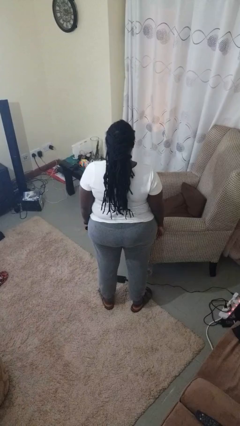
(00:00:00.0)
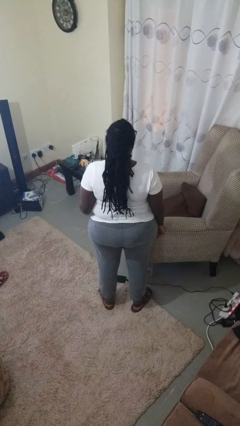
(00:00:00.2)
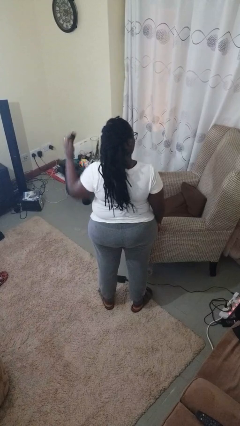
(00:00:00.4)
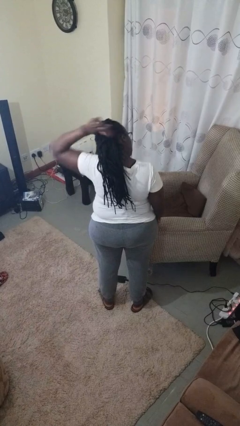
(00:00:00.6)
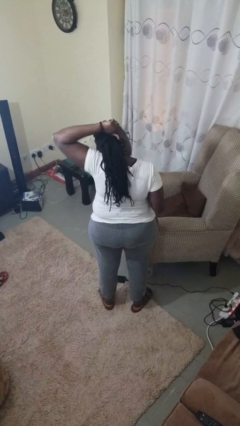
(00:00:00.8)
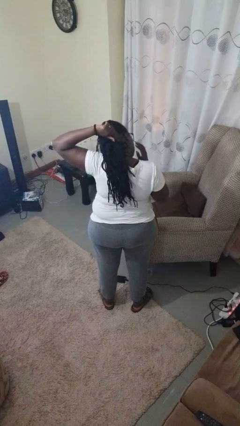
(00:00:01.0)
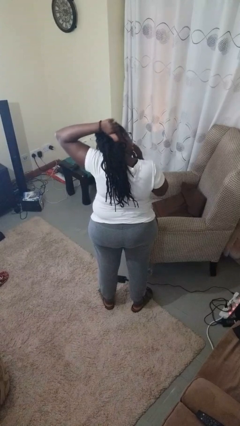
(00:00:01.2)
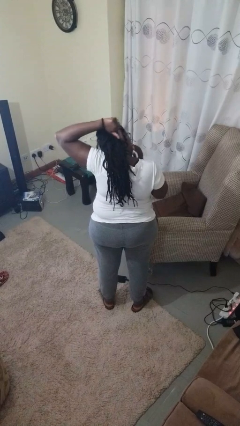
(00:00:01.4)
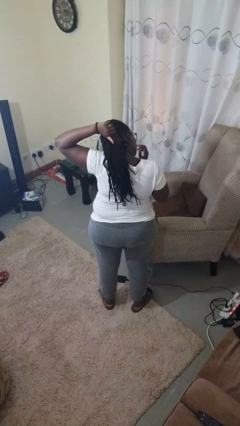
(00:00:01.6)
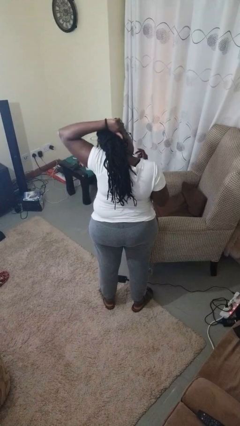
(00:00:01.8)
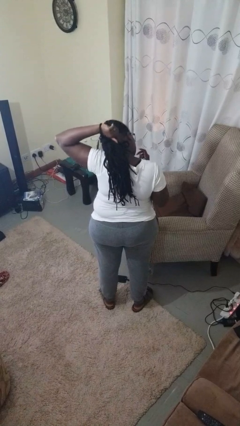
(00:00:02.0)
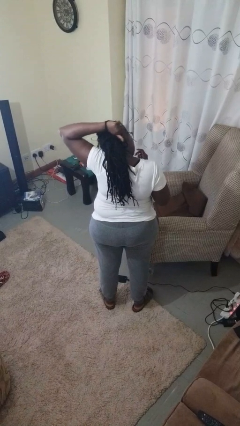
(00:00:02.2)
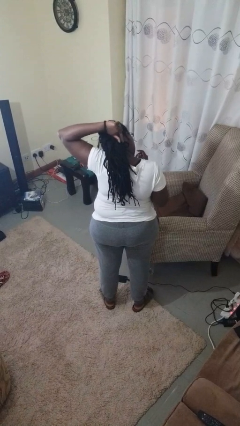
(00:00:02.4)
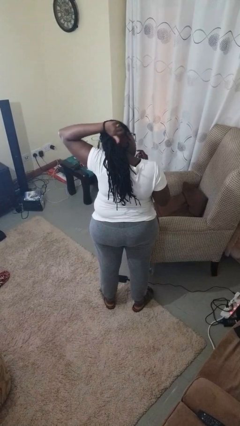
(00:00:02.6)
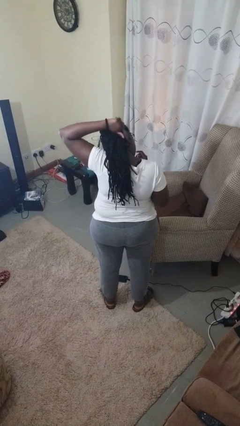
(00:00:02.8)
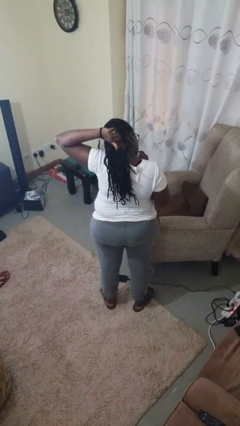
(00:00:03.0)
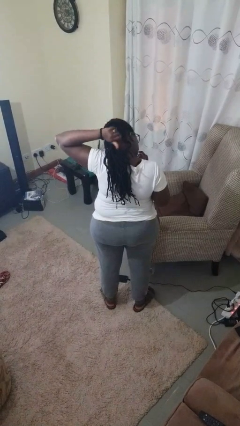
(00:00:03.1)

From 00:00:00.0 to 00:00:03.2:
person brushes hair

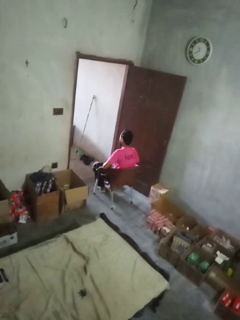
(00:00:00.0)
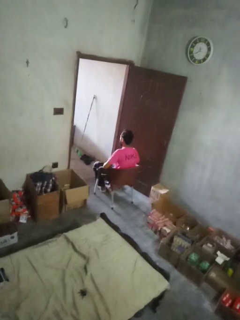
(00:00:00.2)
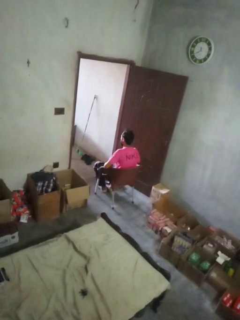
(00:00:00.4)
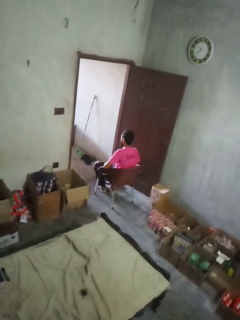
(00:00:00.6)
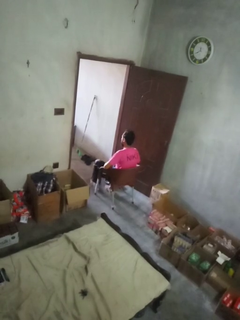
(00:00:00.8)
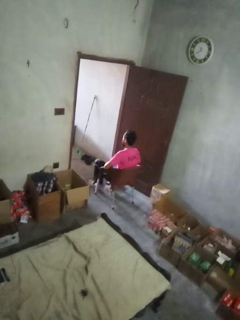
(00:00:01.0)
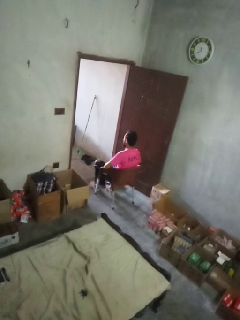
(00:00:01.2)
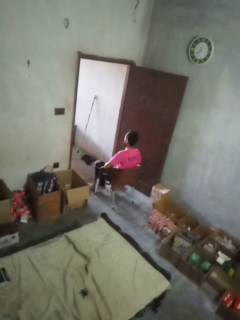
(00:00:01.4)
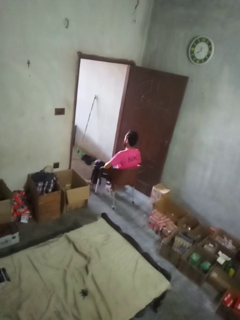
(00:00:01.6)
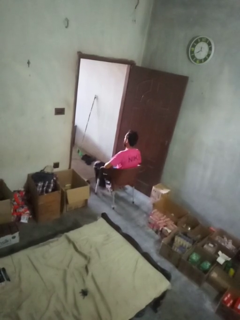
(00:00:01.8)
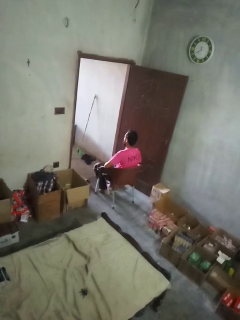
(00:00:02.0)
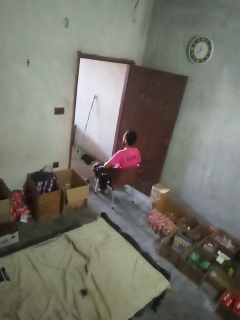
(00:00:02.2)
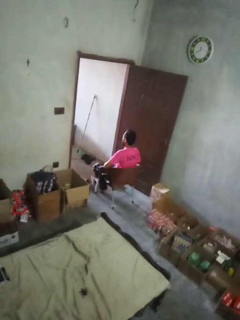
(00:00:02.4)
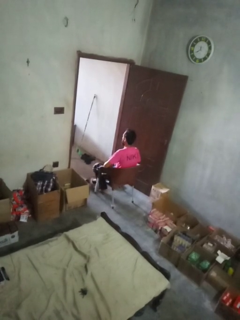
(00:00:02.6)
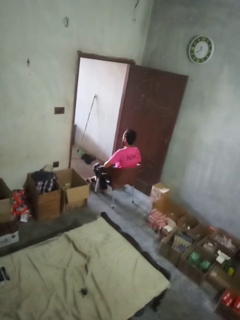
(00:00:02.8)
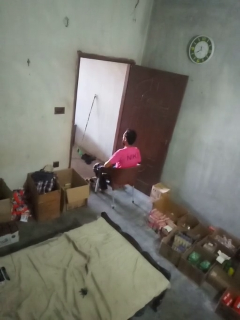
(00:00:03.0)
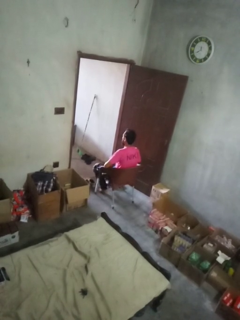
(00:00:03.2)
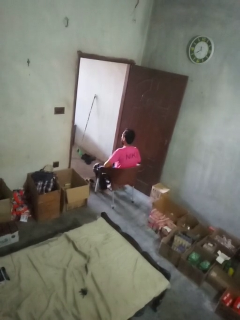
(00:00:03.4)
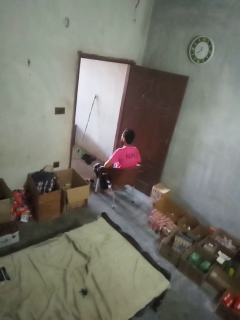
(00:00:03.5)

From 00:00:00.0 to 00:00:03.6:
person takes off shoes

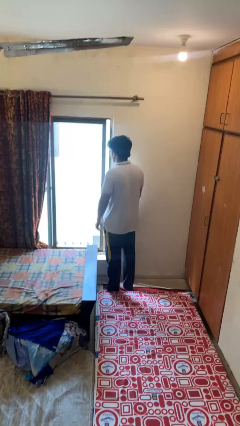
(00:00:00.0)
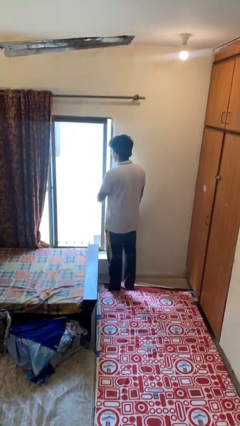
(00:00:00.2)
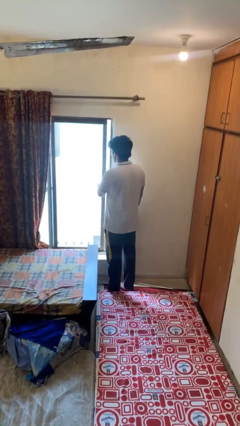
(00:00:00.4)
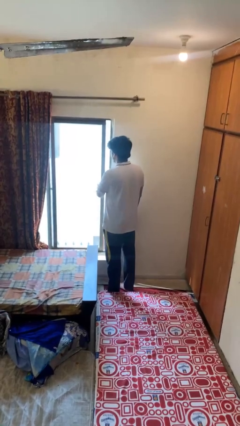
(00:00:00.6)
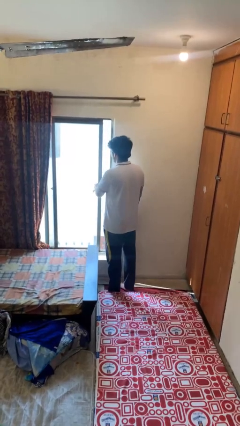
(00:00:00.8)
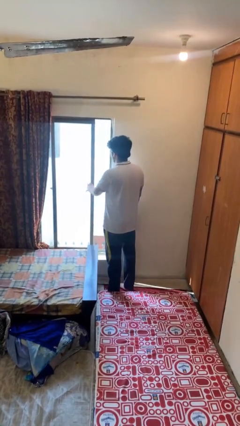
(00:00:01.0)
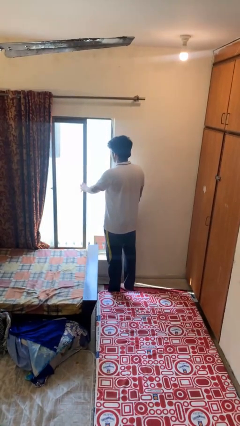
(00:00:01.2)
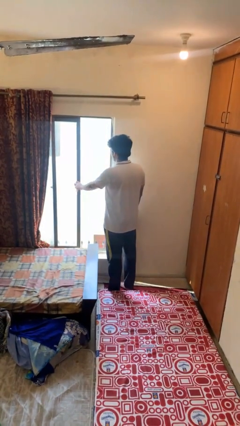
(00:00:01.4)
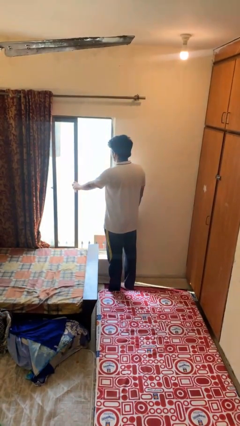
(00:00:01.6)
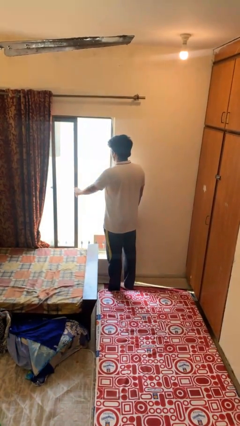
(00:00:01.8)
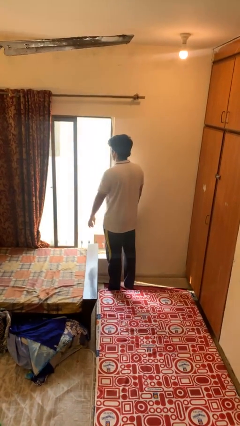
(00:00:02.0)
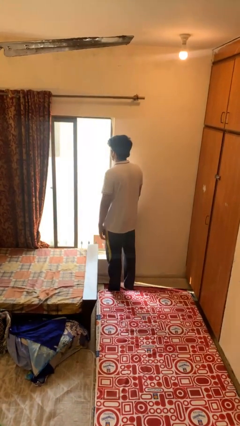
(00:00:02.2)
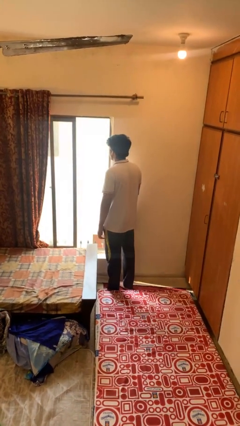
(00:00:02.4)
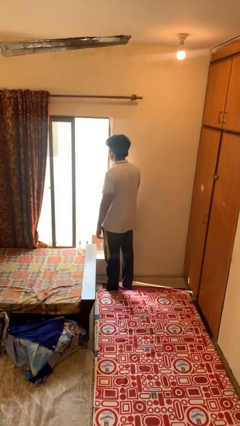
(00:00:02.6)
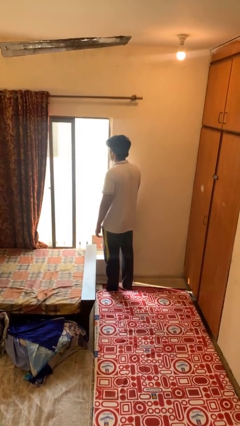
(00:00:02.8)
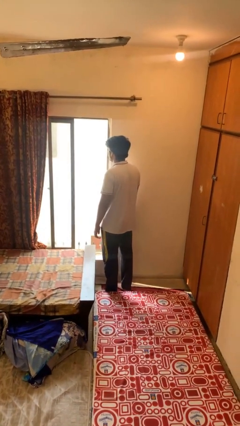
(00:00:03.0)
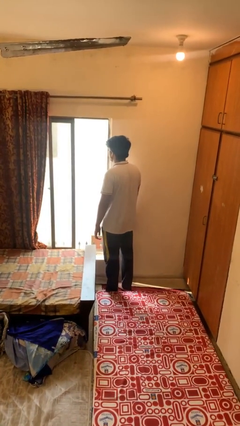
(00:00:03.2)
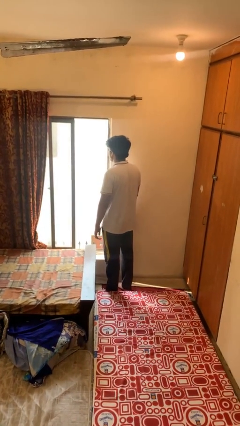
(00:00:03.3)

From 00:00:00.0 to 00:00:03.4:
person opens home window

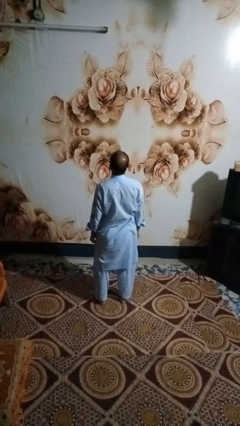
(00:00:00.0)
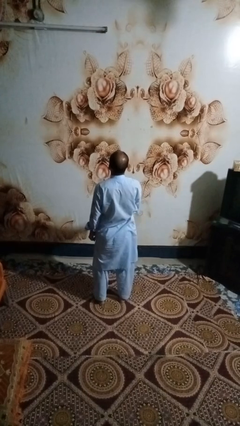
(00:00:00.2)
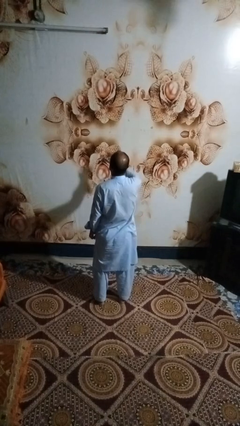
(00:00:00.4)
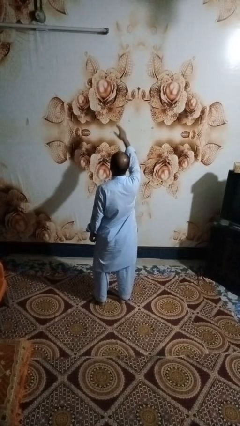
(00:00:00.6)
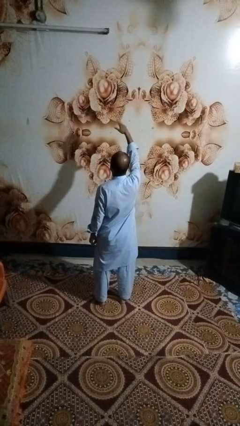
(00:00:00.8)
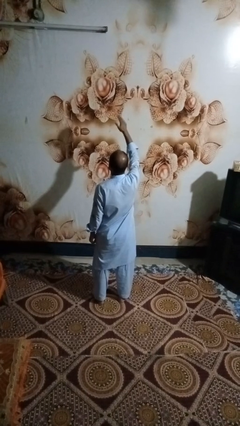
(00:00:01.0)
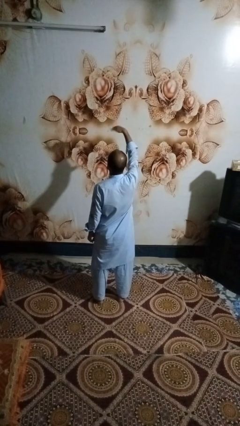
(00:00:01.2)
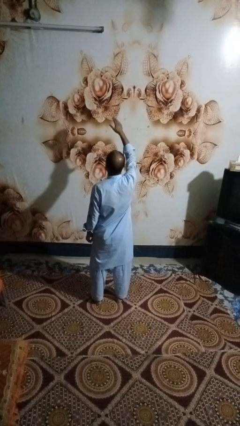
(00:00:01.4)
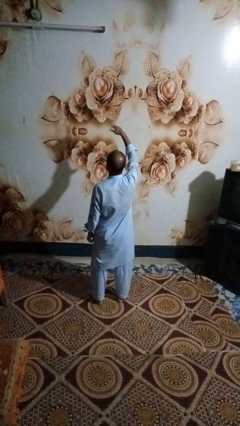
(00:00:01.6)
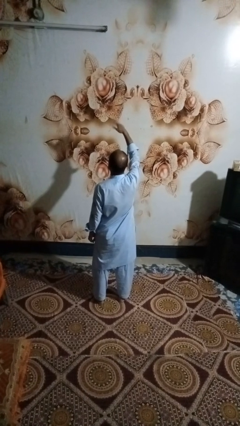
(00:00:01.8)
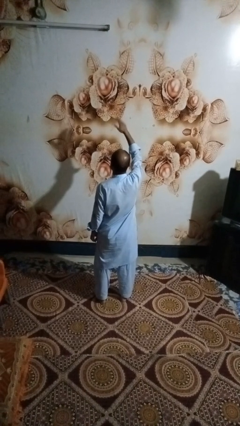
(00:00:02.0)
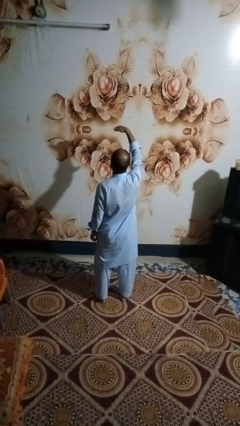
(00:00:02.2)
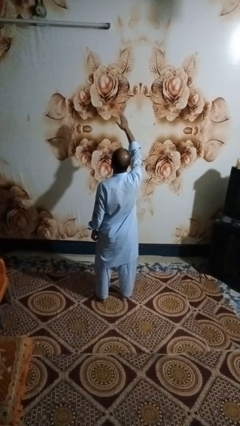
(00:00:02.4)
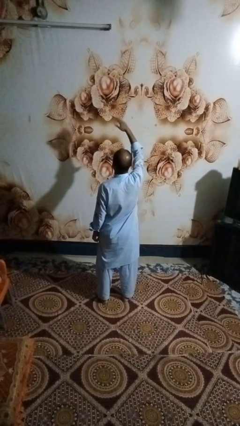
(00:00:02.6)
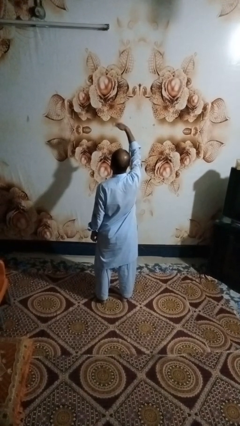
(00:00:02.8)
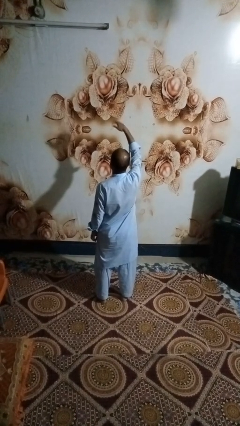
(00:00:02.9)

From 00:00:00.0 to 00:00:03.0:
person gestures come here

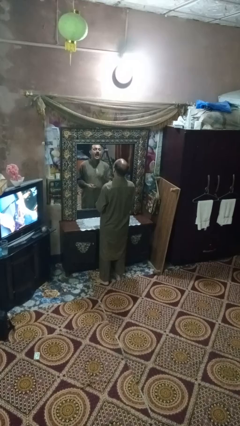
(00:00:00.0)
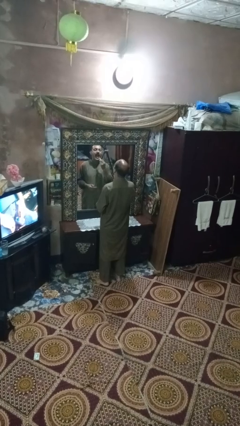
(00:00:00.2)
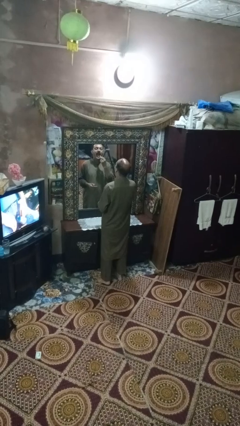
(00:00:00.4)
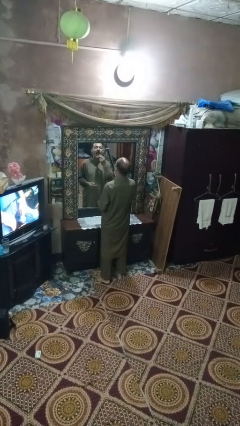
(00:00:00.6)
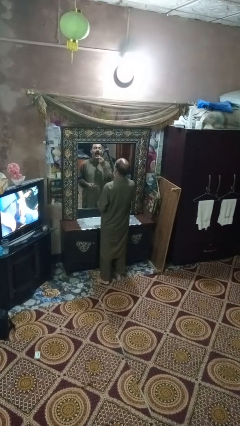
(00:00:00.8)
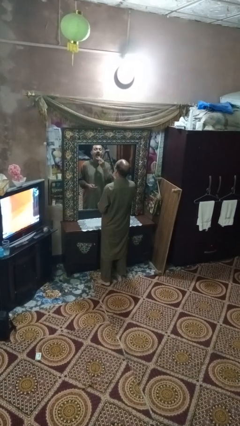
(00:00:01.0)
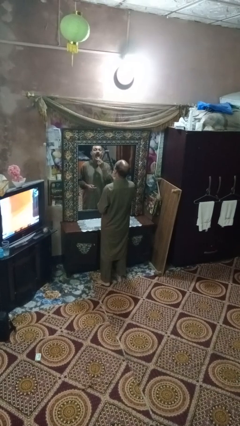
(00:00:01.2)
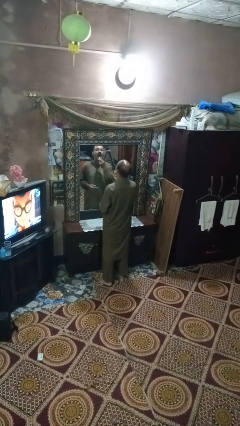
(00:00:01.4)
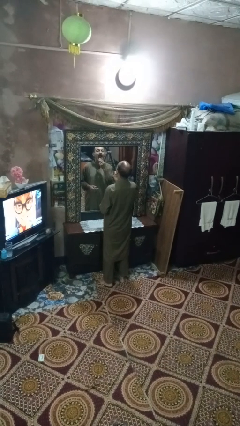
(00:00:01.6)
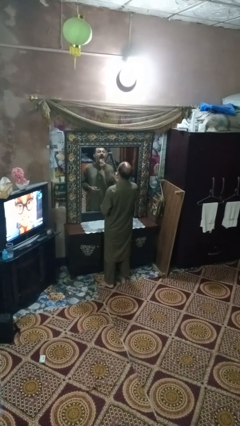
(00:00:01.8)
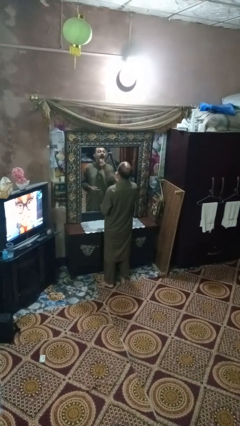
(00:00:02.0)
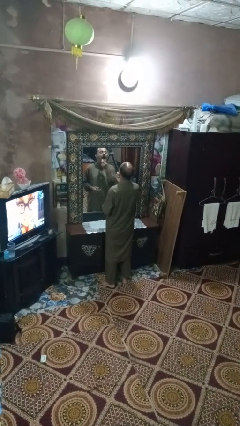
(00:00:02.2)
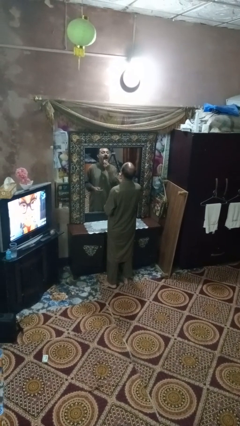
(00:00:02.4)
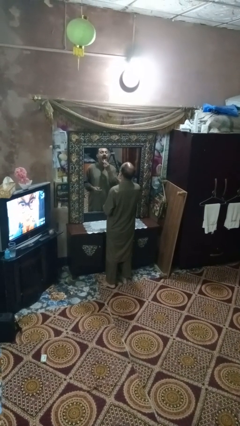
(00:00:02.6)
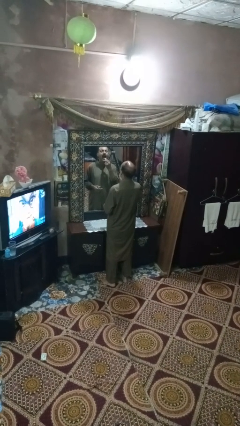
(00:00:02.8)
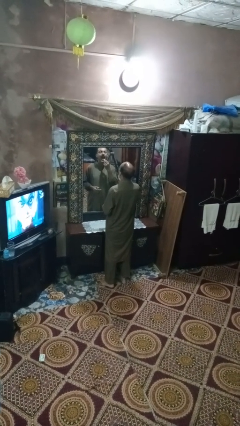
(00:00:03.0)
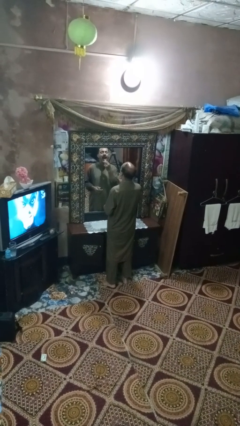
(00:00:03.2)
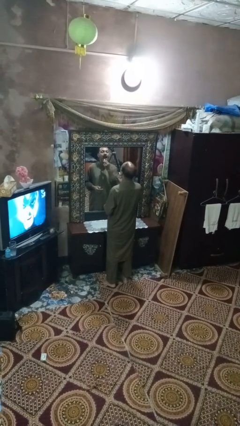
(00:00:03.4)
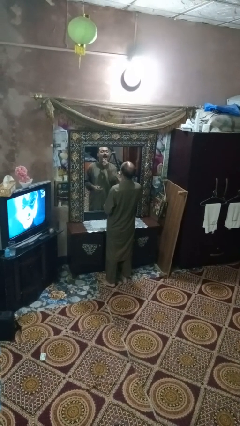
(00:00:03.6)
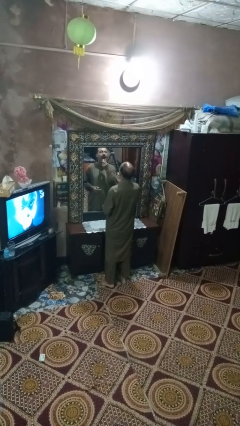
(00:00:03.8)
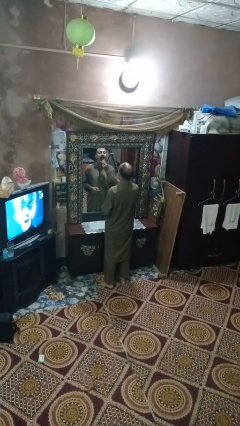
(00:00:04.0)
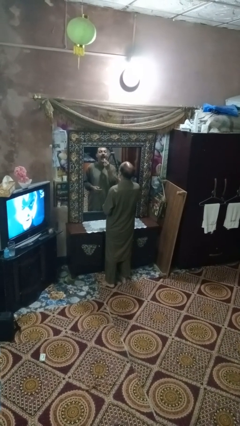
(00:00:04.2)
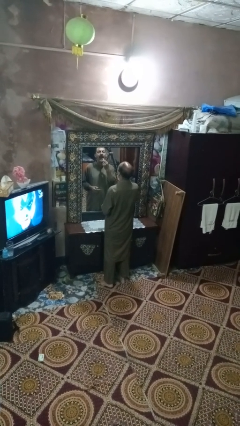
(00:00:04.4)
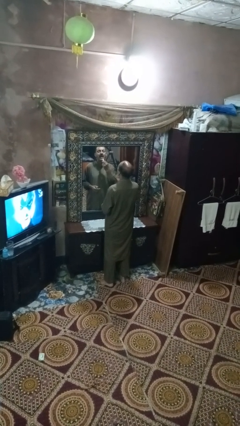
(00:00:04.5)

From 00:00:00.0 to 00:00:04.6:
person applies lip makeup

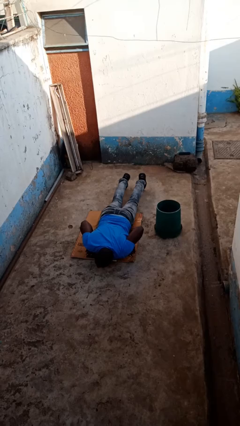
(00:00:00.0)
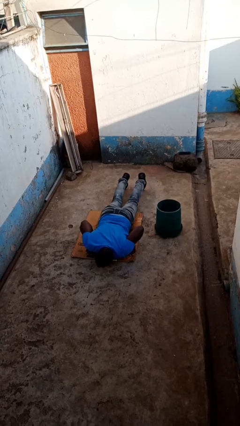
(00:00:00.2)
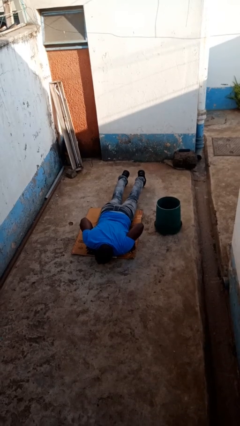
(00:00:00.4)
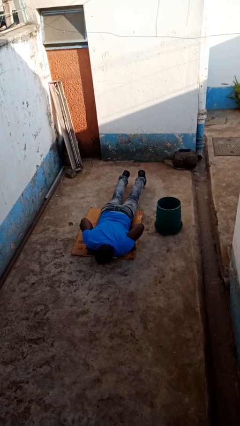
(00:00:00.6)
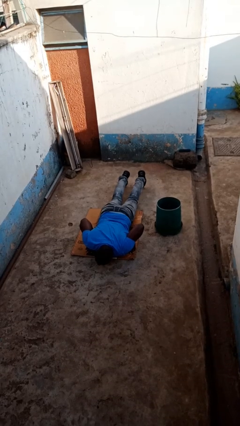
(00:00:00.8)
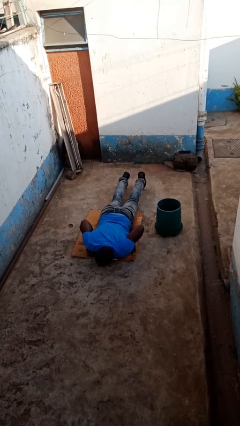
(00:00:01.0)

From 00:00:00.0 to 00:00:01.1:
person lies down on floor
